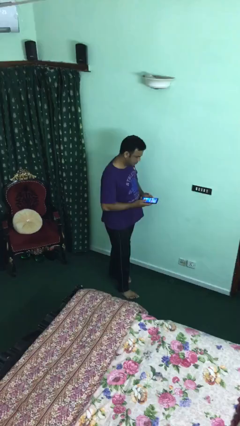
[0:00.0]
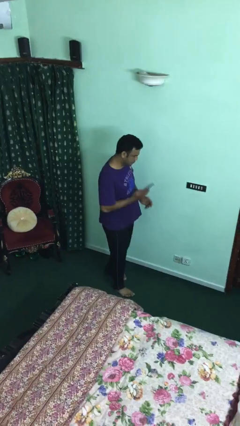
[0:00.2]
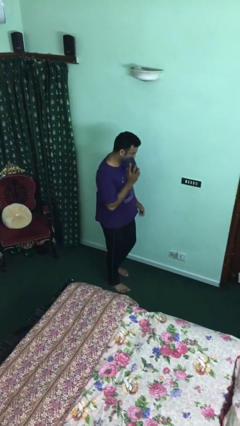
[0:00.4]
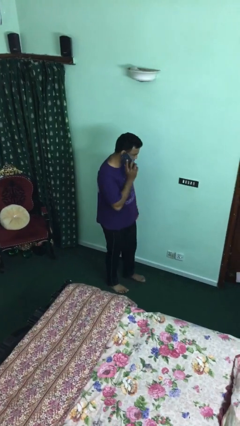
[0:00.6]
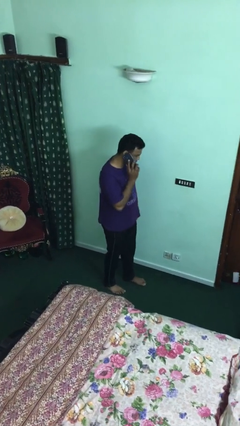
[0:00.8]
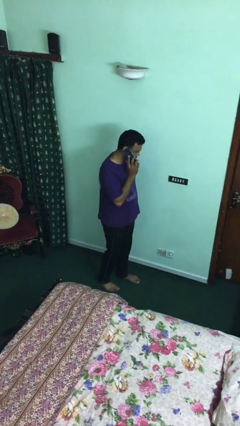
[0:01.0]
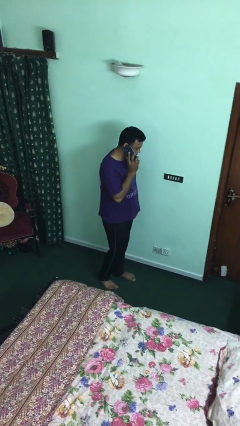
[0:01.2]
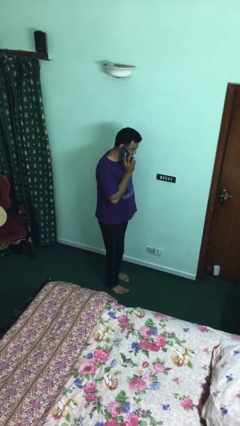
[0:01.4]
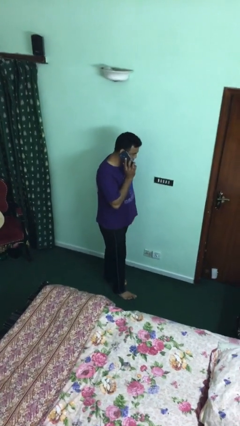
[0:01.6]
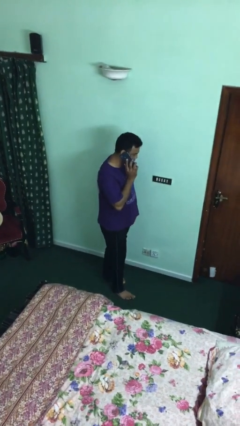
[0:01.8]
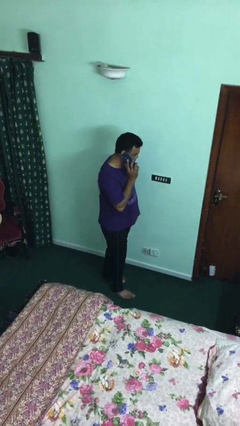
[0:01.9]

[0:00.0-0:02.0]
person talks on phone

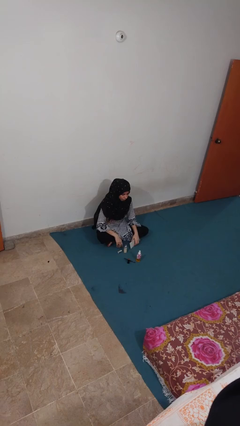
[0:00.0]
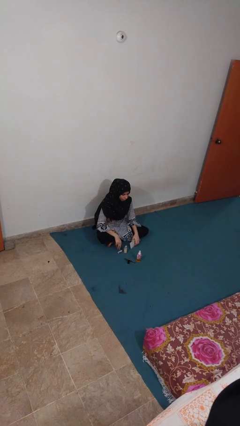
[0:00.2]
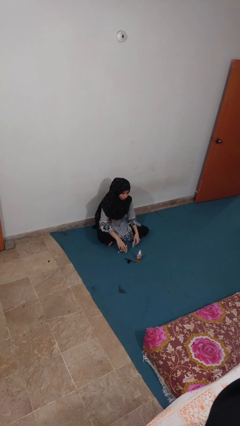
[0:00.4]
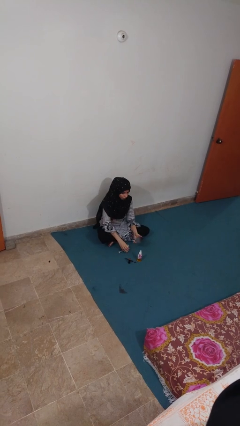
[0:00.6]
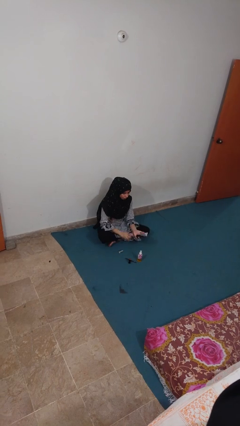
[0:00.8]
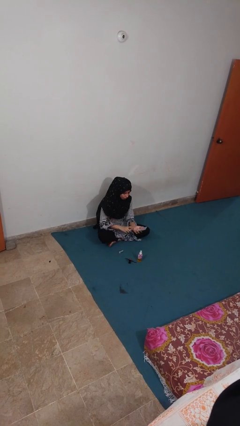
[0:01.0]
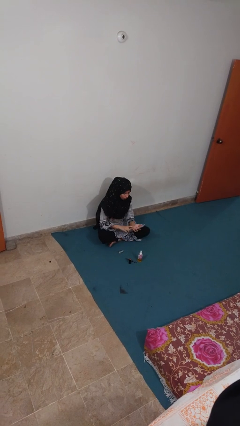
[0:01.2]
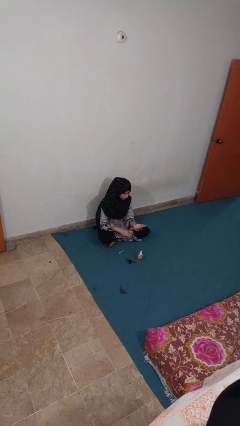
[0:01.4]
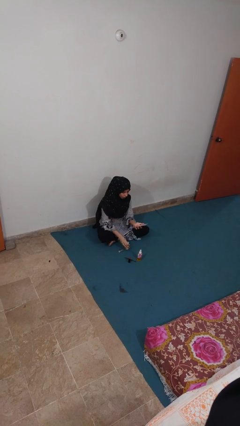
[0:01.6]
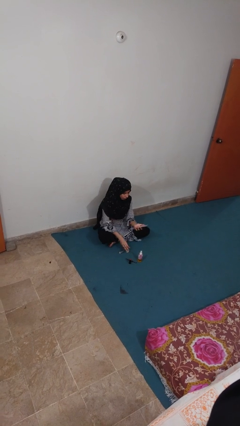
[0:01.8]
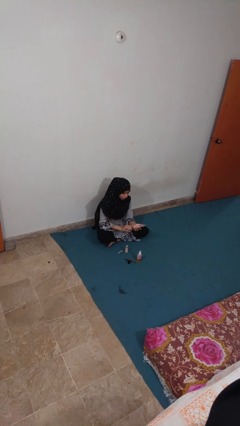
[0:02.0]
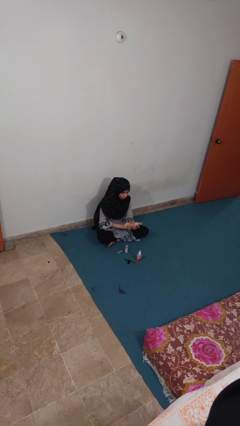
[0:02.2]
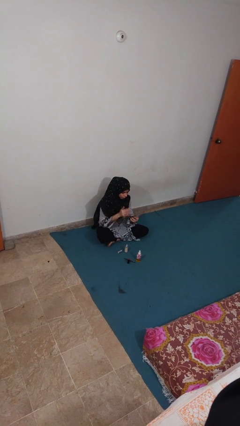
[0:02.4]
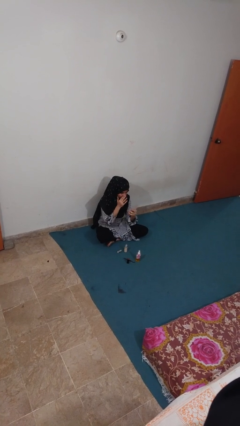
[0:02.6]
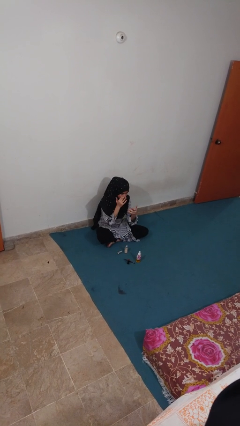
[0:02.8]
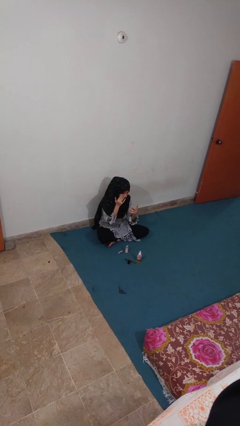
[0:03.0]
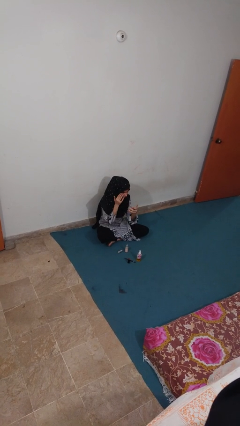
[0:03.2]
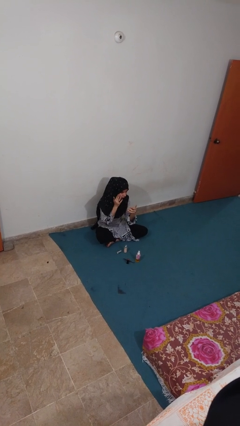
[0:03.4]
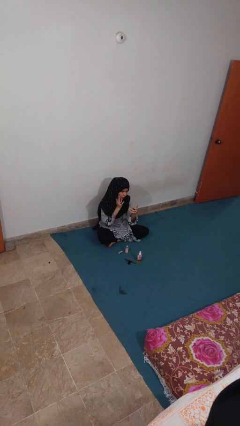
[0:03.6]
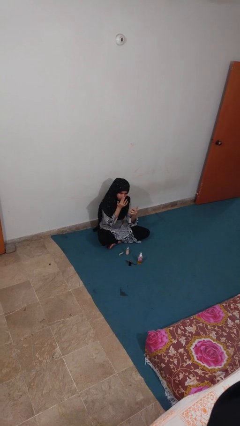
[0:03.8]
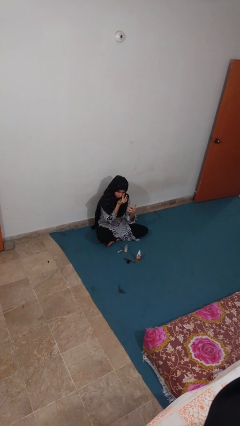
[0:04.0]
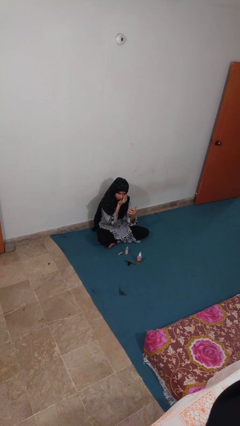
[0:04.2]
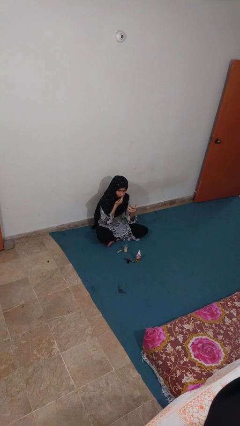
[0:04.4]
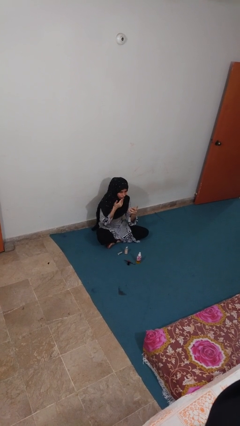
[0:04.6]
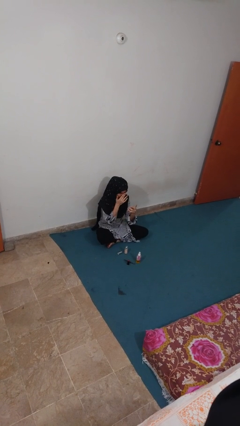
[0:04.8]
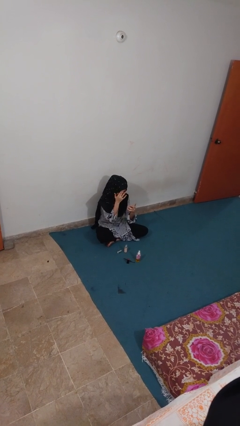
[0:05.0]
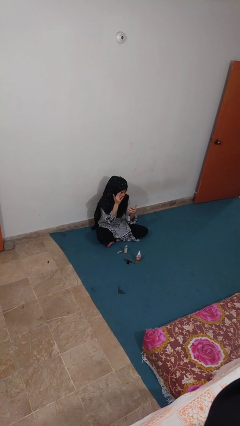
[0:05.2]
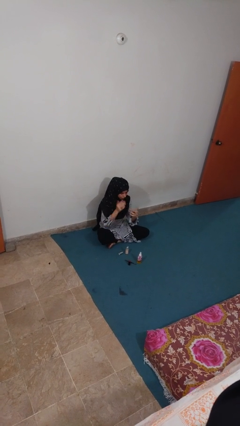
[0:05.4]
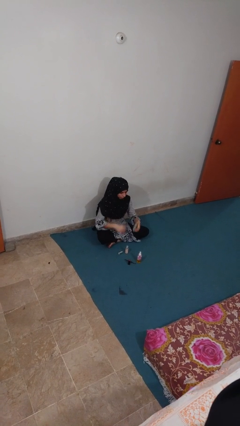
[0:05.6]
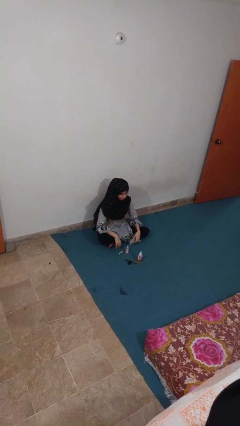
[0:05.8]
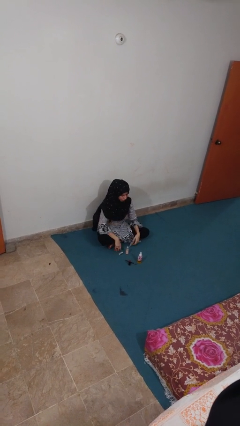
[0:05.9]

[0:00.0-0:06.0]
person applies foundation makeup

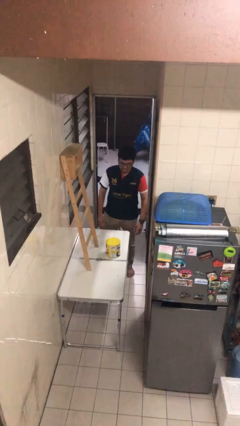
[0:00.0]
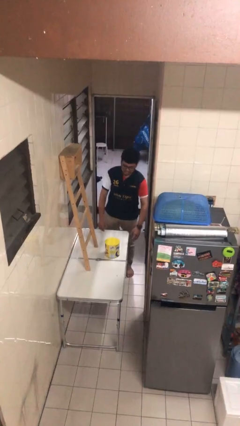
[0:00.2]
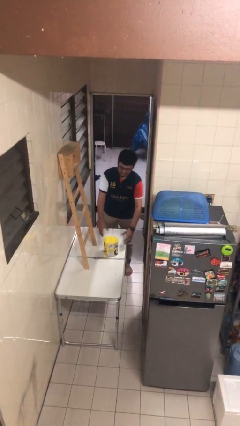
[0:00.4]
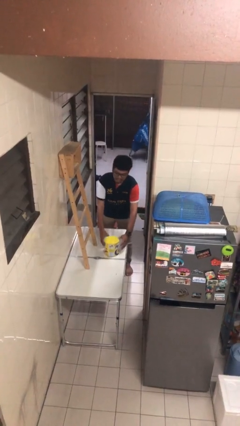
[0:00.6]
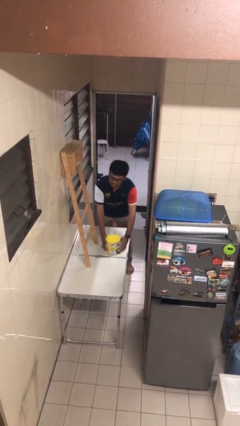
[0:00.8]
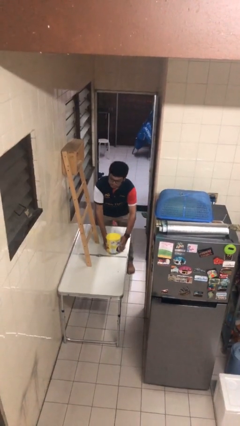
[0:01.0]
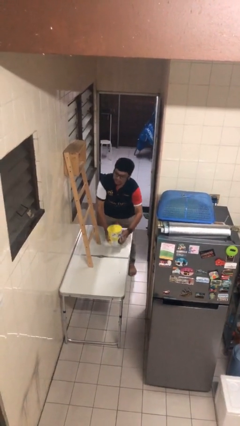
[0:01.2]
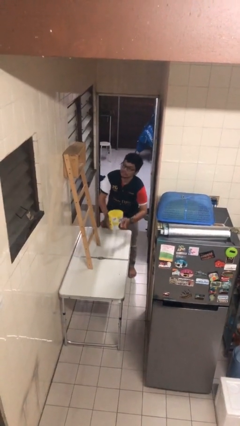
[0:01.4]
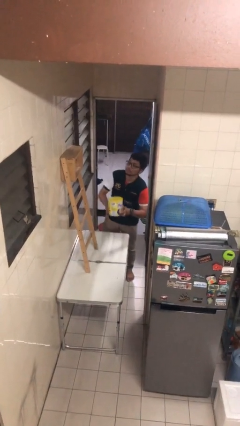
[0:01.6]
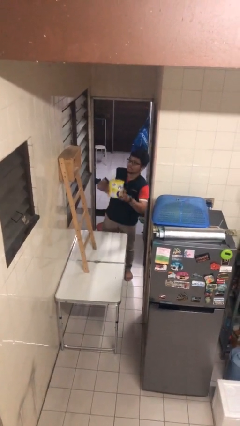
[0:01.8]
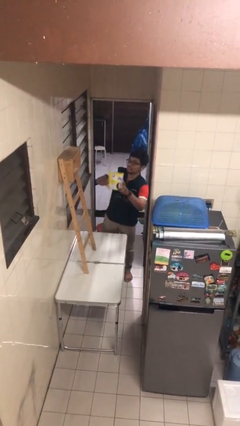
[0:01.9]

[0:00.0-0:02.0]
person picks up object from table

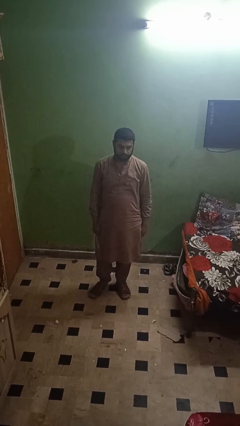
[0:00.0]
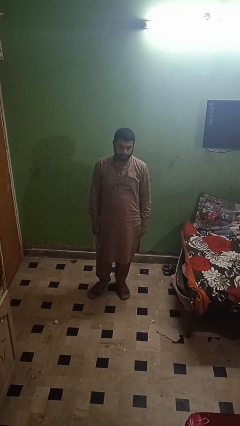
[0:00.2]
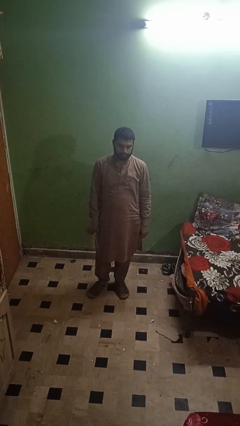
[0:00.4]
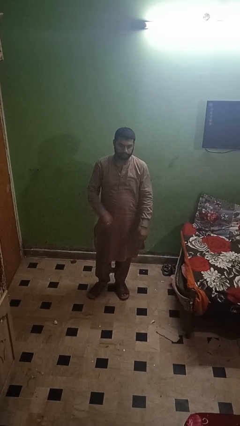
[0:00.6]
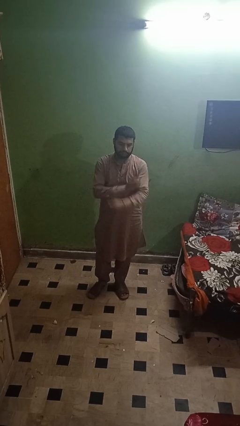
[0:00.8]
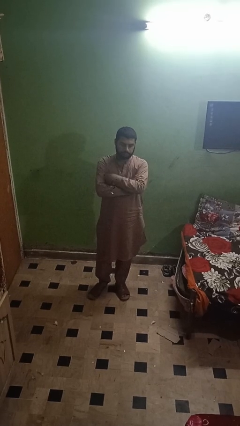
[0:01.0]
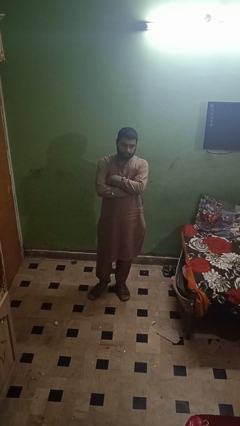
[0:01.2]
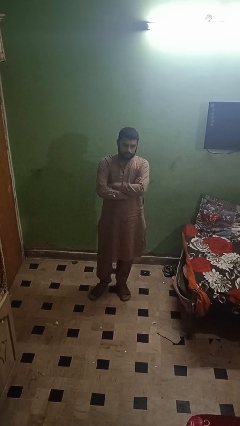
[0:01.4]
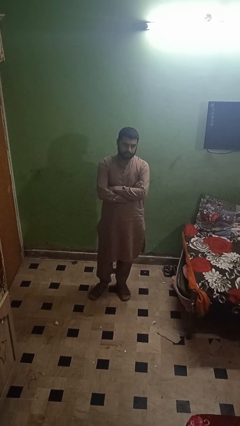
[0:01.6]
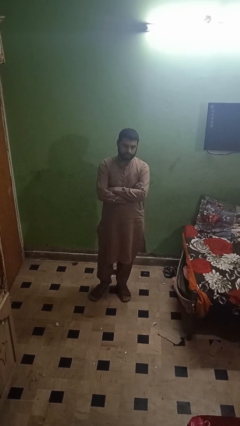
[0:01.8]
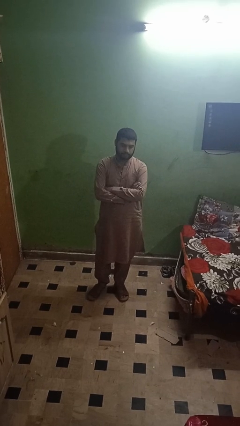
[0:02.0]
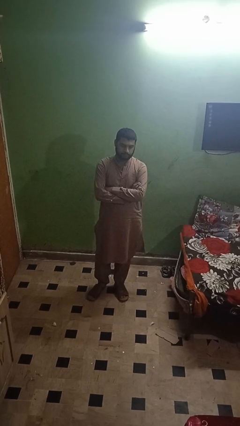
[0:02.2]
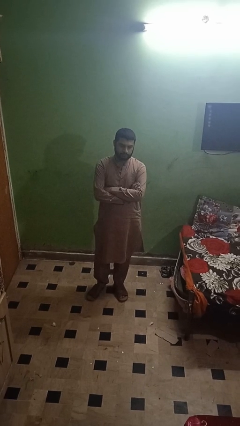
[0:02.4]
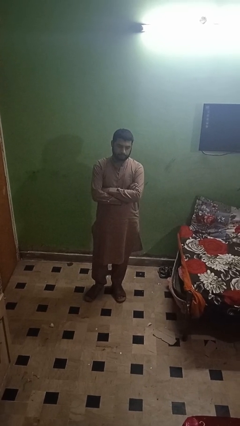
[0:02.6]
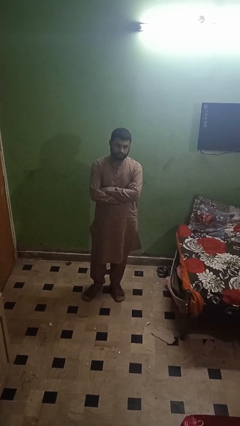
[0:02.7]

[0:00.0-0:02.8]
person crosses arms

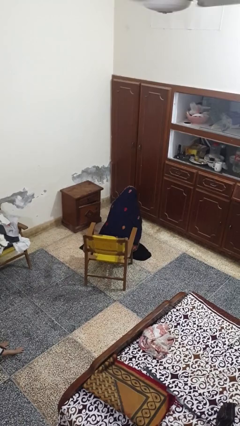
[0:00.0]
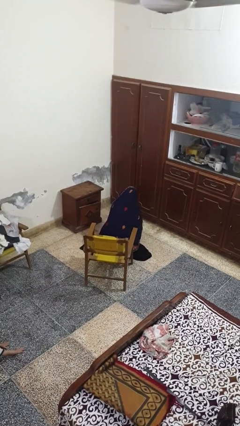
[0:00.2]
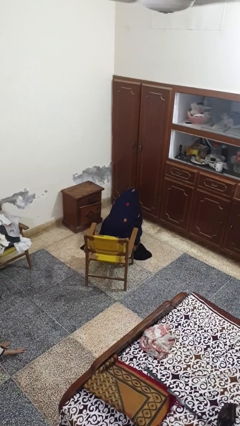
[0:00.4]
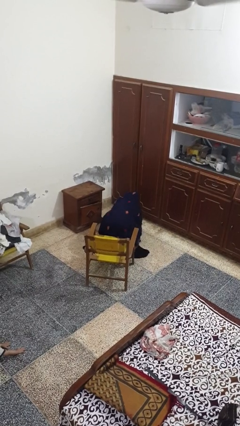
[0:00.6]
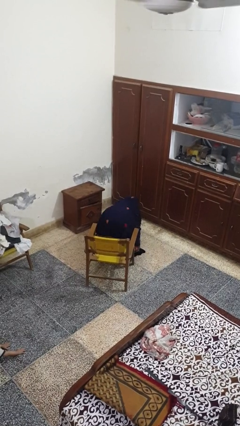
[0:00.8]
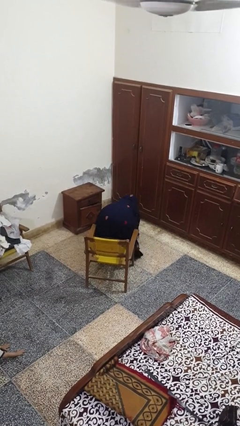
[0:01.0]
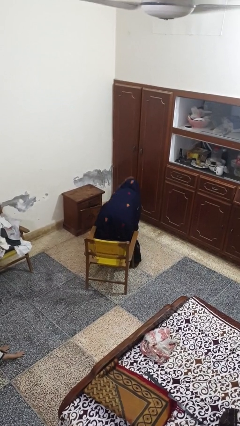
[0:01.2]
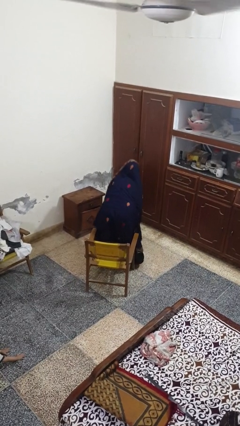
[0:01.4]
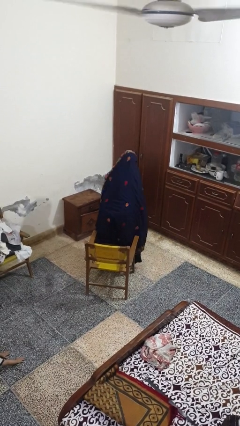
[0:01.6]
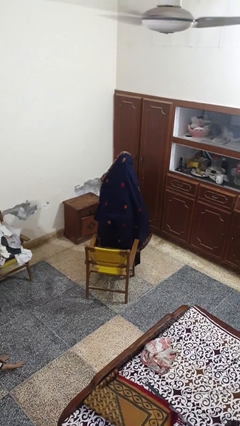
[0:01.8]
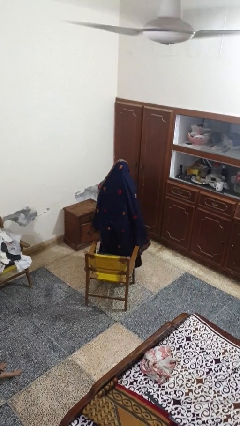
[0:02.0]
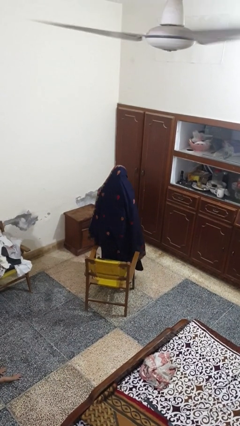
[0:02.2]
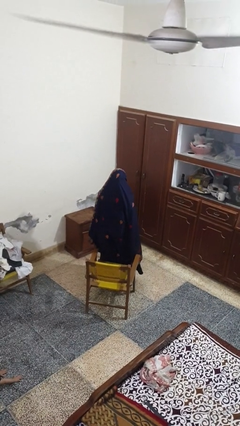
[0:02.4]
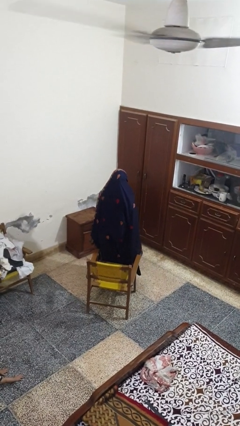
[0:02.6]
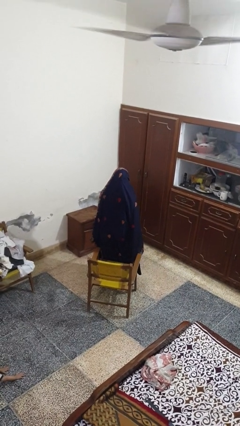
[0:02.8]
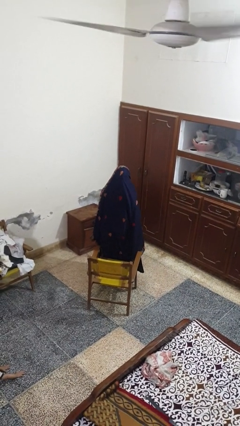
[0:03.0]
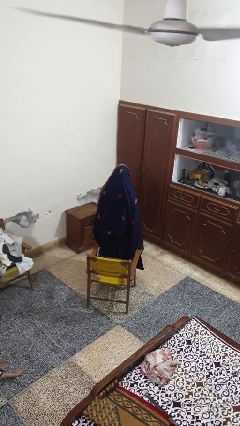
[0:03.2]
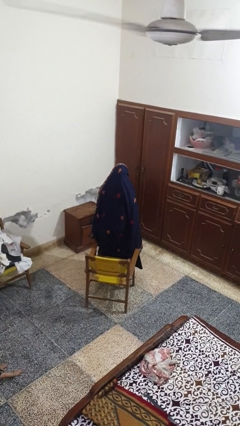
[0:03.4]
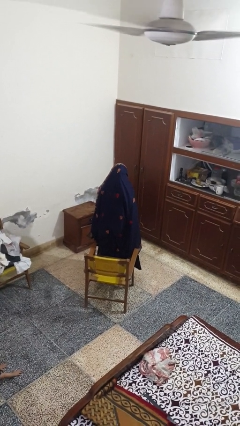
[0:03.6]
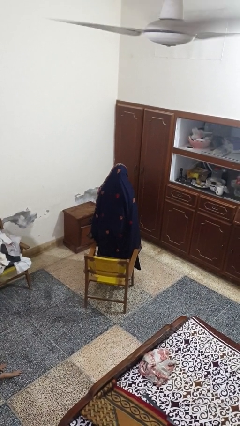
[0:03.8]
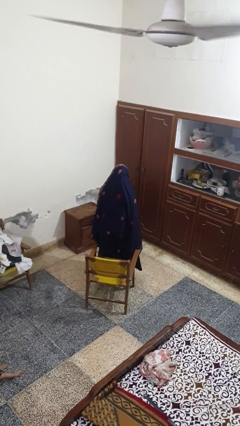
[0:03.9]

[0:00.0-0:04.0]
person stands up from floor

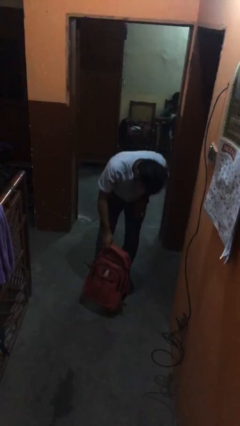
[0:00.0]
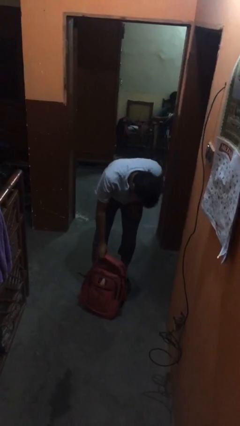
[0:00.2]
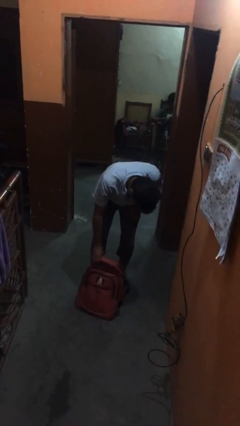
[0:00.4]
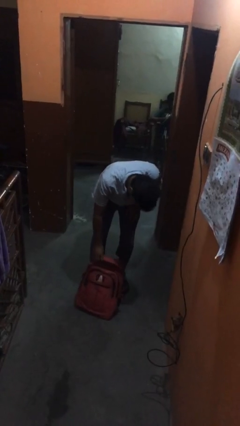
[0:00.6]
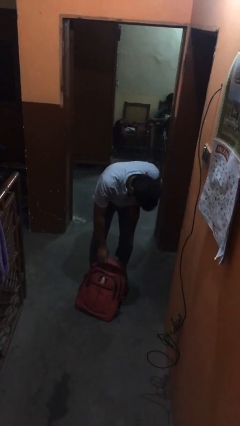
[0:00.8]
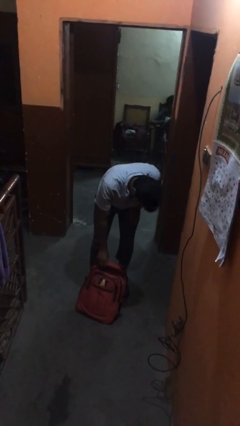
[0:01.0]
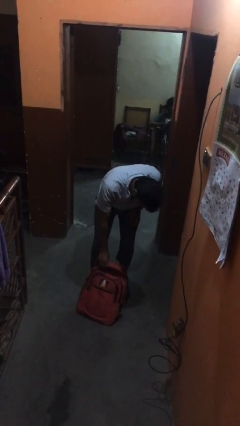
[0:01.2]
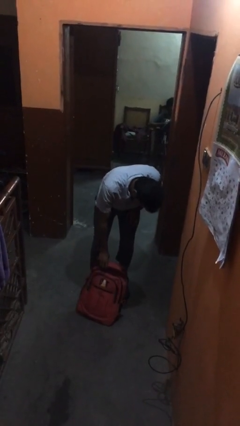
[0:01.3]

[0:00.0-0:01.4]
person puts down object on floor
